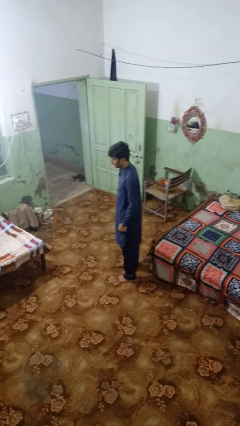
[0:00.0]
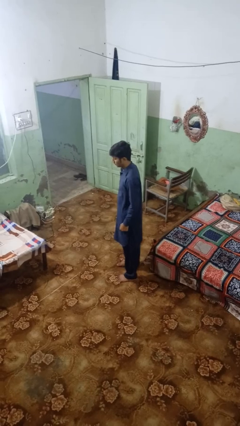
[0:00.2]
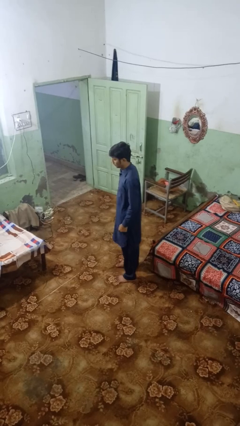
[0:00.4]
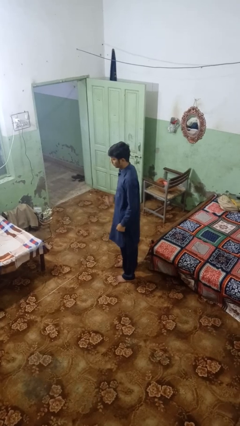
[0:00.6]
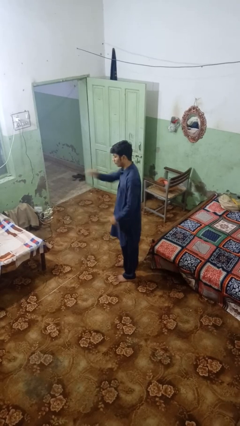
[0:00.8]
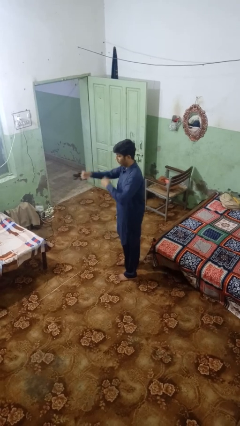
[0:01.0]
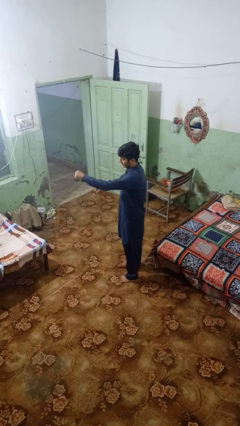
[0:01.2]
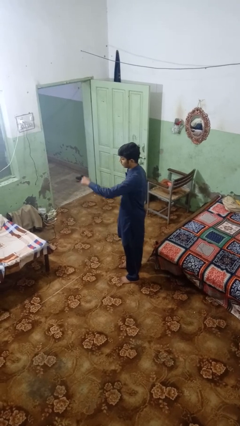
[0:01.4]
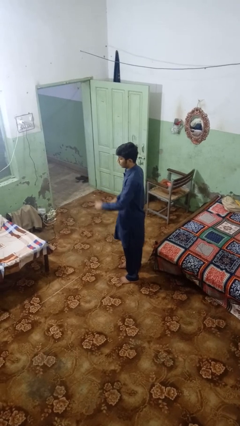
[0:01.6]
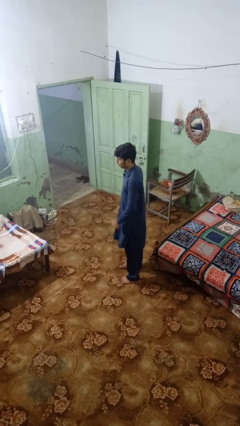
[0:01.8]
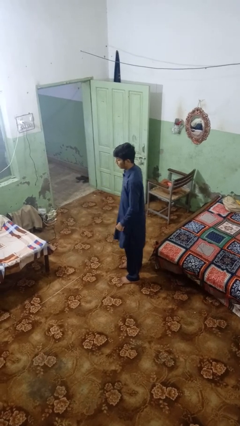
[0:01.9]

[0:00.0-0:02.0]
person punches

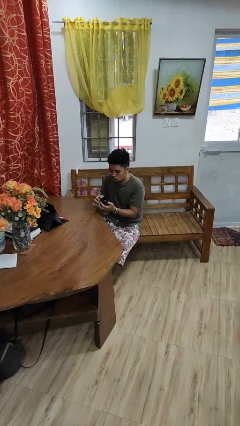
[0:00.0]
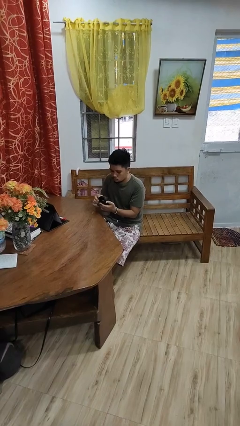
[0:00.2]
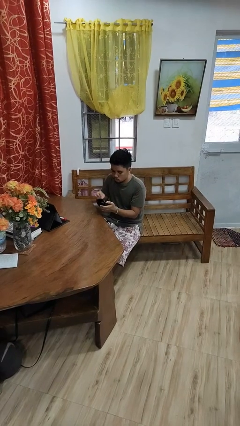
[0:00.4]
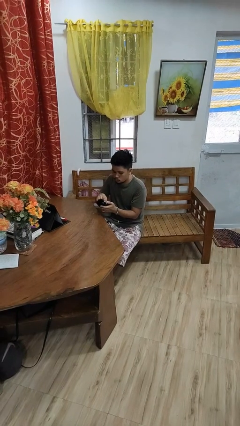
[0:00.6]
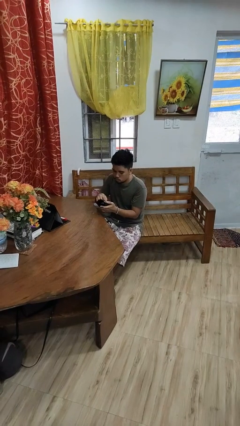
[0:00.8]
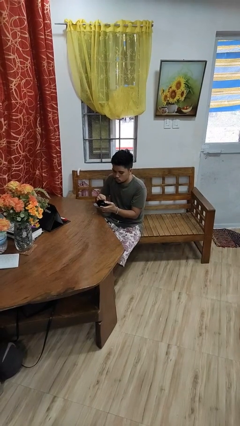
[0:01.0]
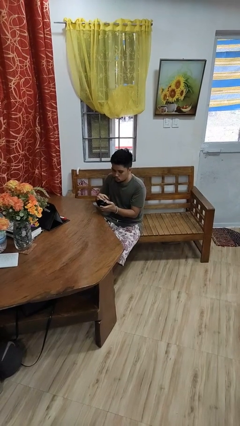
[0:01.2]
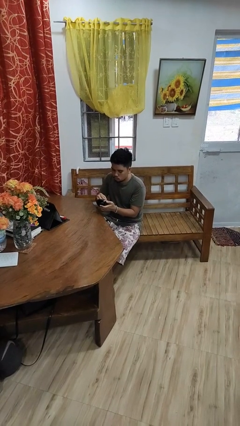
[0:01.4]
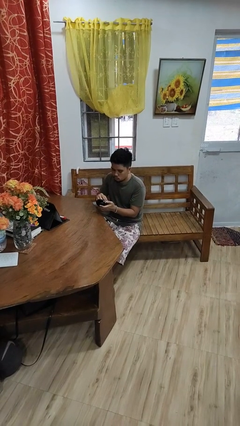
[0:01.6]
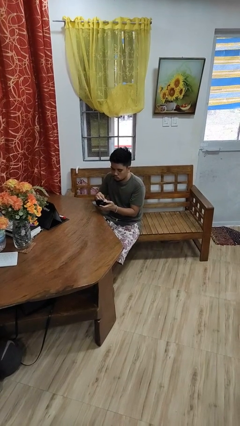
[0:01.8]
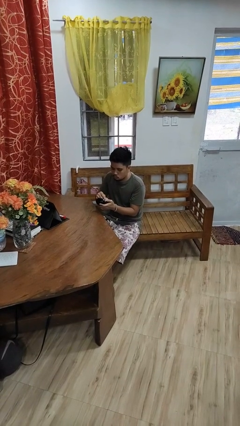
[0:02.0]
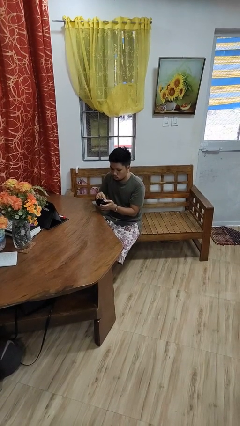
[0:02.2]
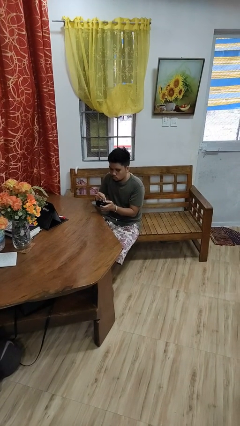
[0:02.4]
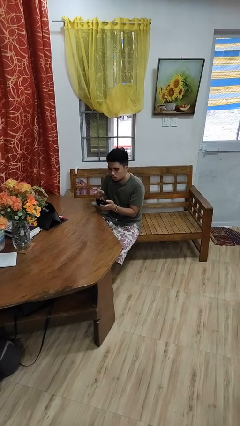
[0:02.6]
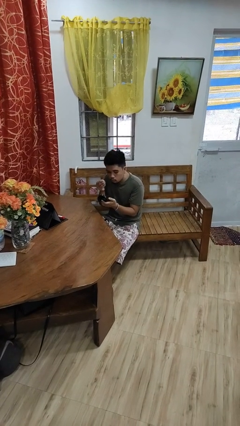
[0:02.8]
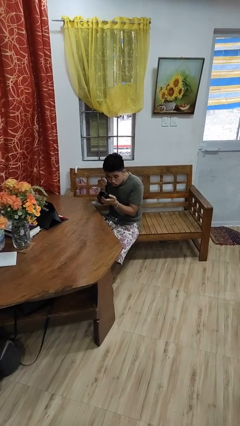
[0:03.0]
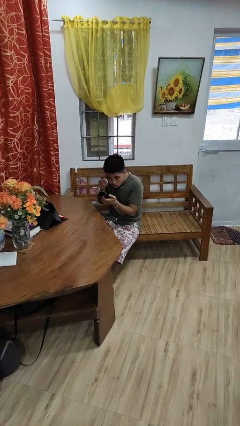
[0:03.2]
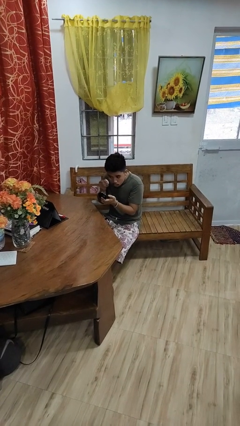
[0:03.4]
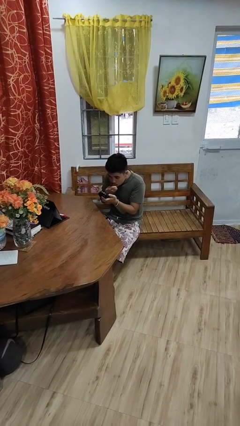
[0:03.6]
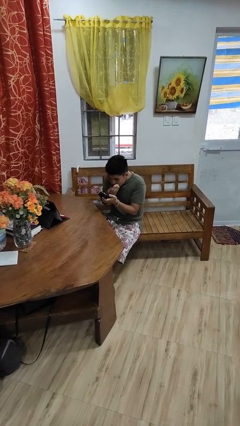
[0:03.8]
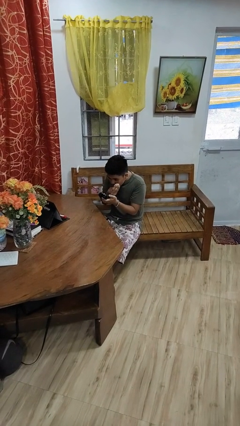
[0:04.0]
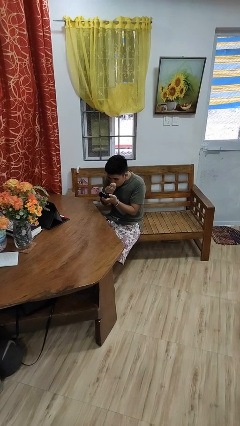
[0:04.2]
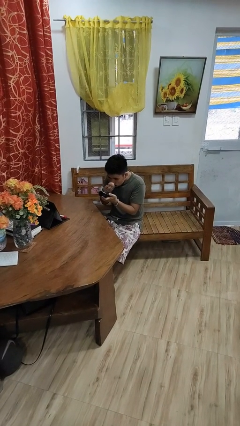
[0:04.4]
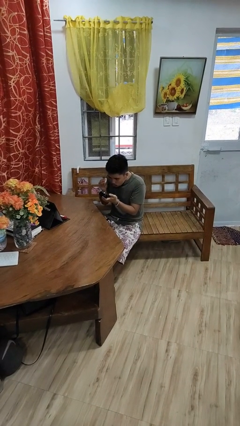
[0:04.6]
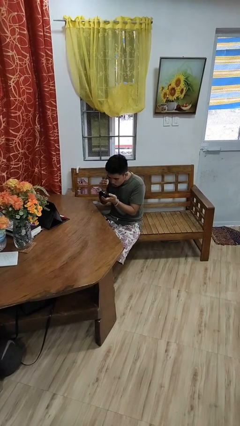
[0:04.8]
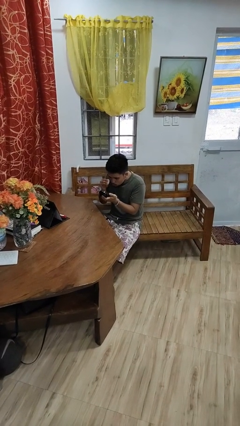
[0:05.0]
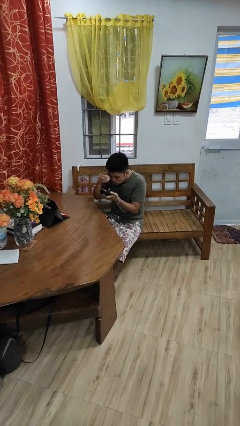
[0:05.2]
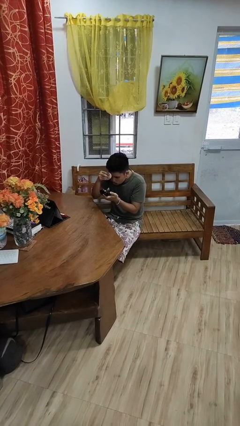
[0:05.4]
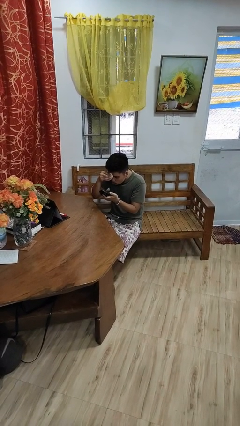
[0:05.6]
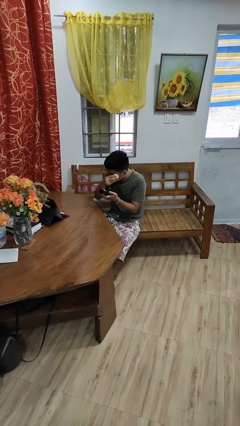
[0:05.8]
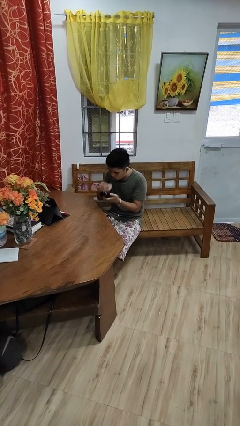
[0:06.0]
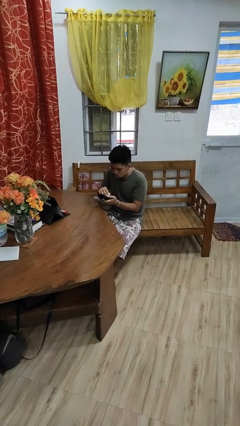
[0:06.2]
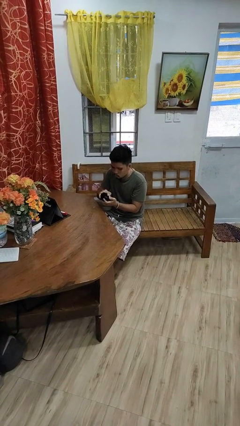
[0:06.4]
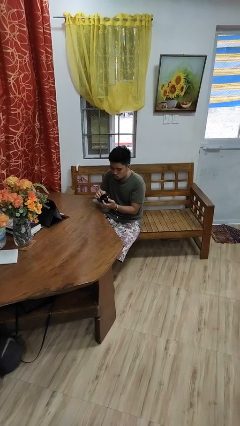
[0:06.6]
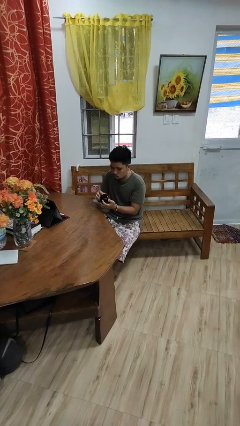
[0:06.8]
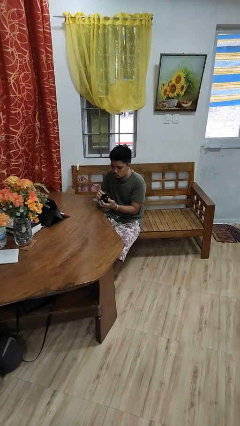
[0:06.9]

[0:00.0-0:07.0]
person applies foundation makeup

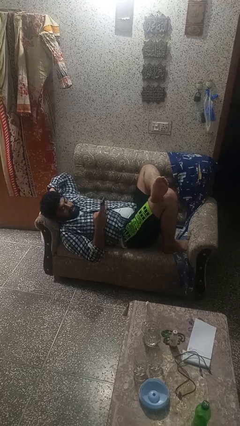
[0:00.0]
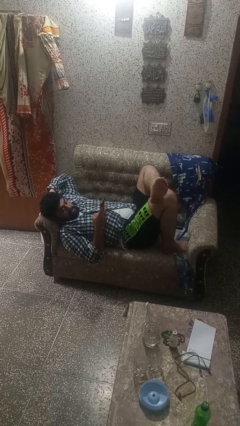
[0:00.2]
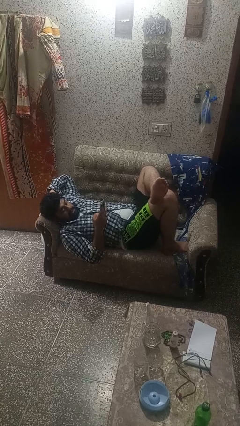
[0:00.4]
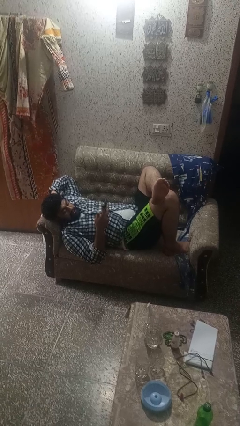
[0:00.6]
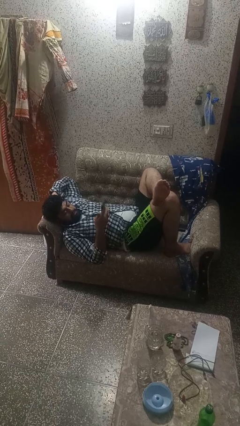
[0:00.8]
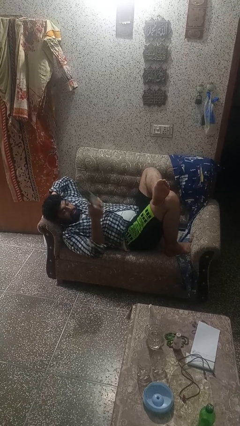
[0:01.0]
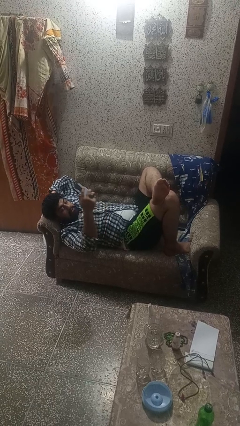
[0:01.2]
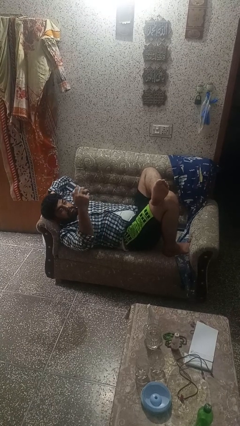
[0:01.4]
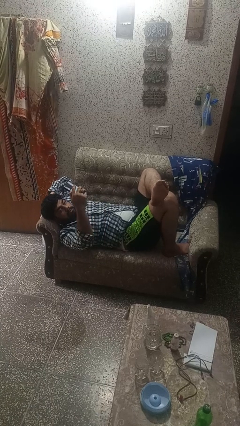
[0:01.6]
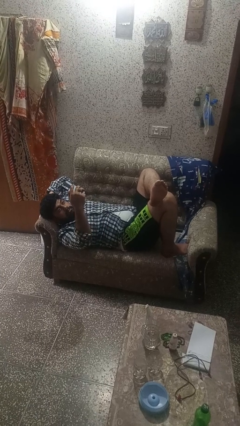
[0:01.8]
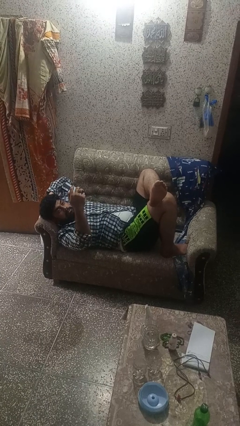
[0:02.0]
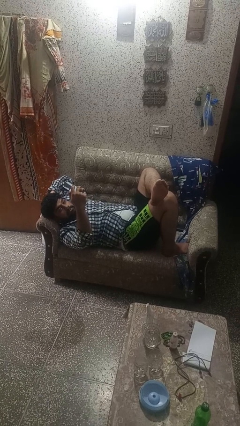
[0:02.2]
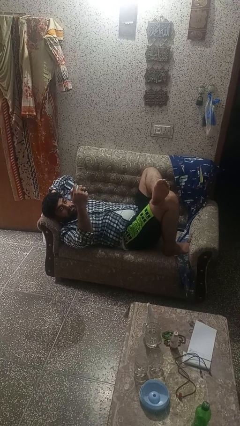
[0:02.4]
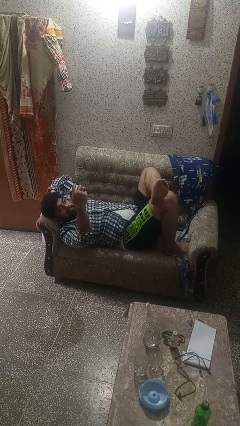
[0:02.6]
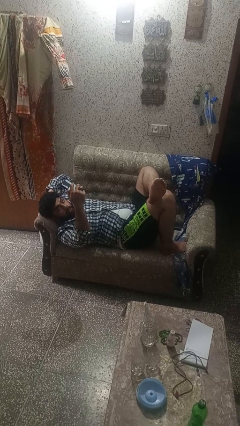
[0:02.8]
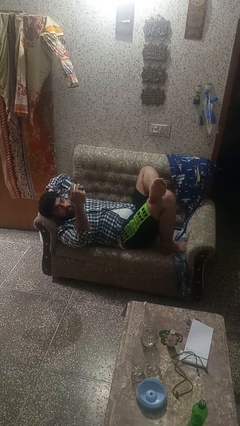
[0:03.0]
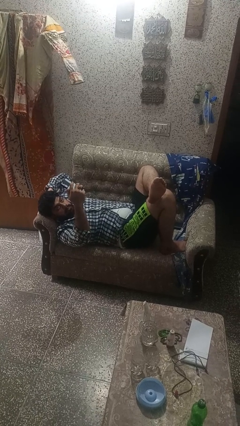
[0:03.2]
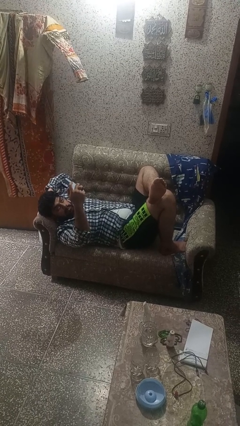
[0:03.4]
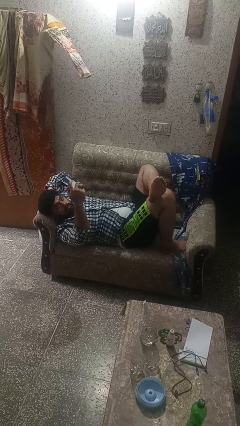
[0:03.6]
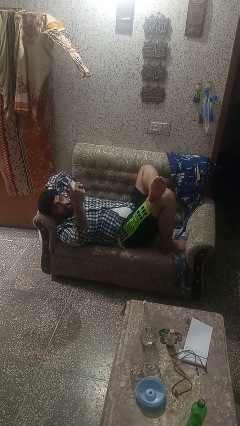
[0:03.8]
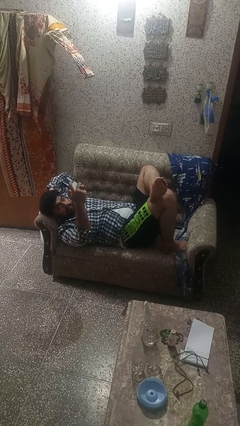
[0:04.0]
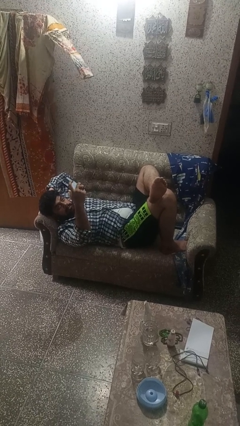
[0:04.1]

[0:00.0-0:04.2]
person takes selfie

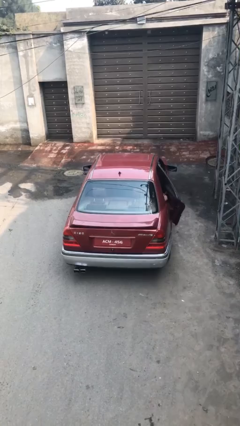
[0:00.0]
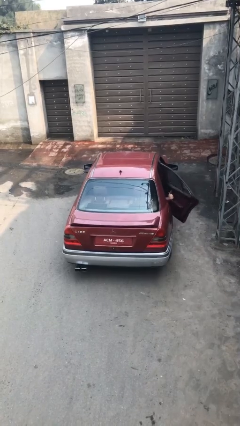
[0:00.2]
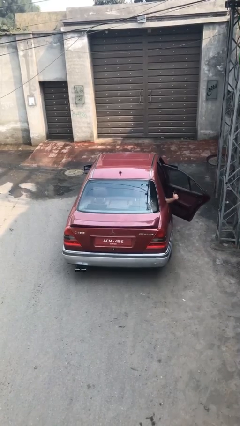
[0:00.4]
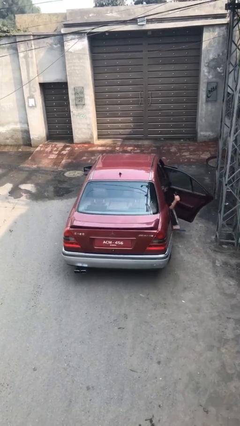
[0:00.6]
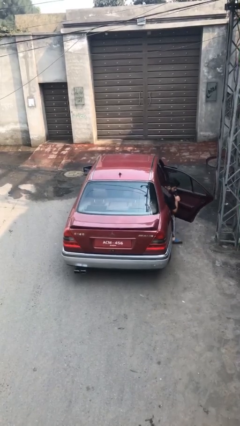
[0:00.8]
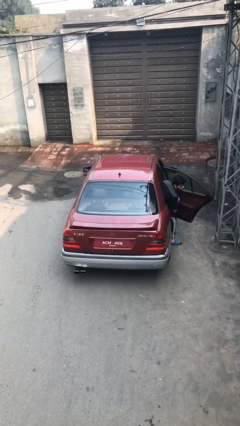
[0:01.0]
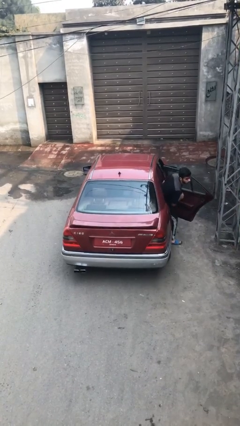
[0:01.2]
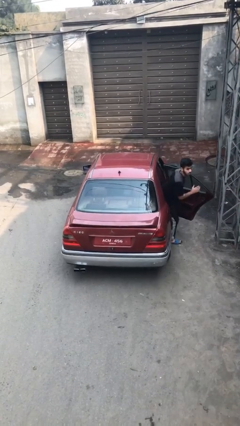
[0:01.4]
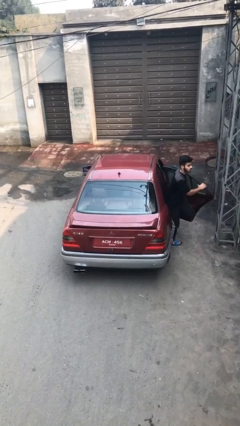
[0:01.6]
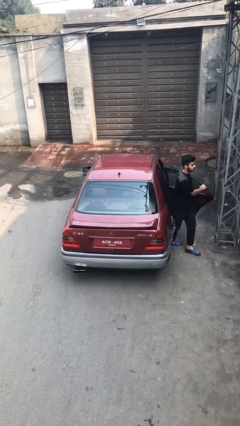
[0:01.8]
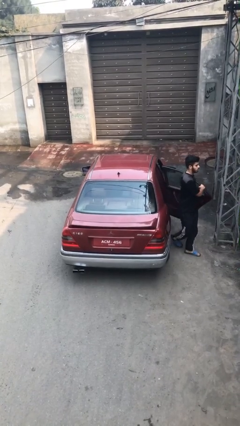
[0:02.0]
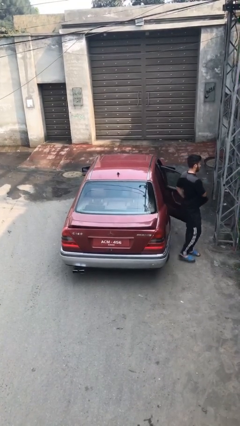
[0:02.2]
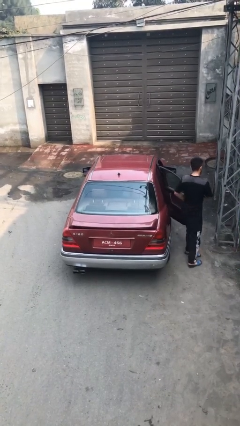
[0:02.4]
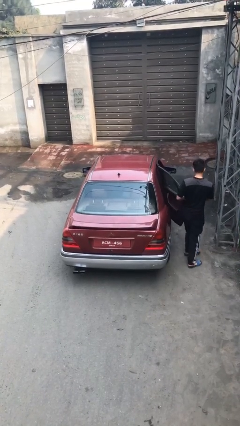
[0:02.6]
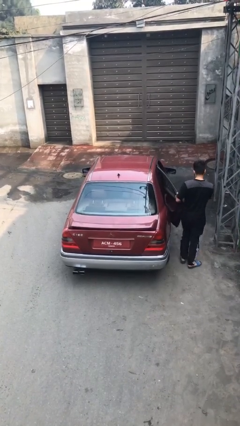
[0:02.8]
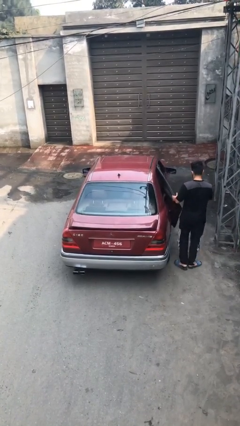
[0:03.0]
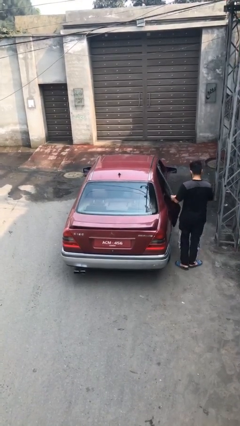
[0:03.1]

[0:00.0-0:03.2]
car drops off person

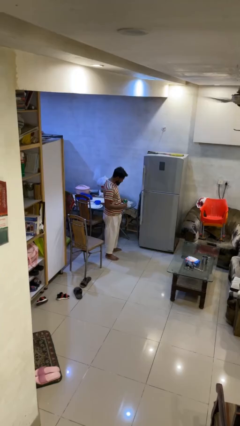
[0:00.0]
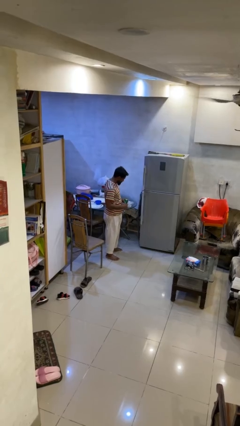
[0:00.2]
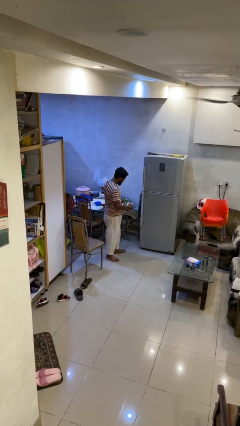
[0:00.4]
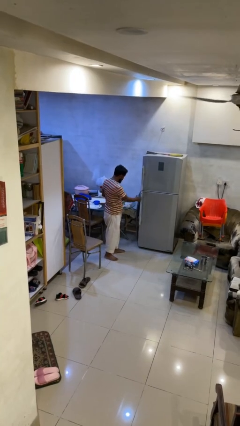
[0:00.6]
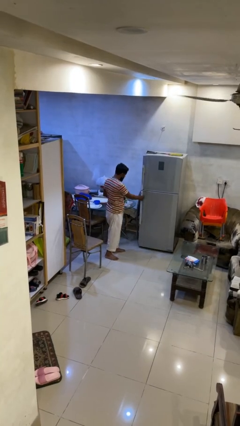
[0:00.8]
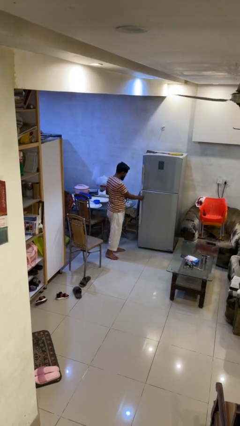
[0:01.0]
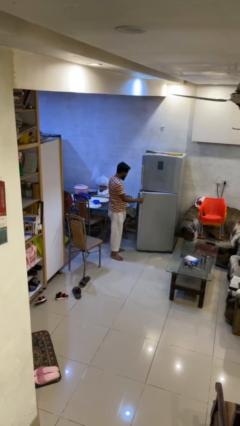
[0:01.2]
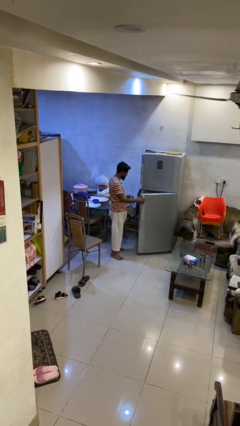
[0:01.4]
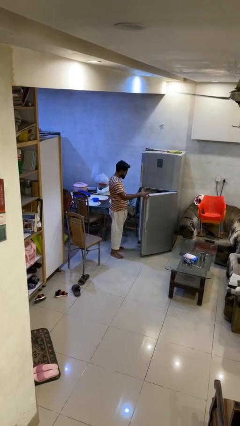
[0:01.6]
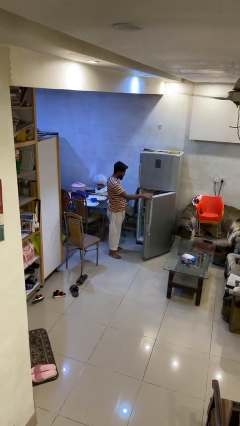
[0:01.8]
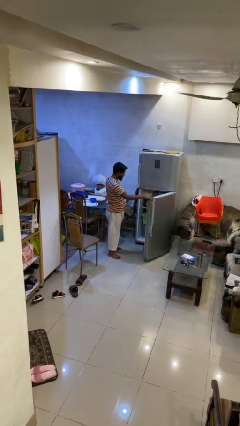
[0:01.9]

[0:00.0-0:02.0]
person opens refrigerator
